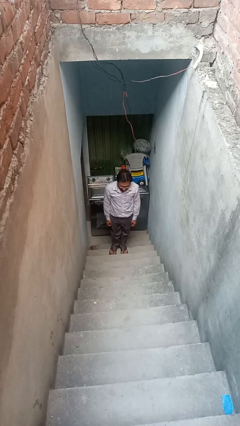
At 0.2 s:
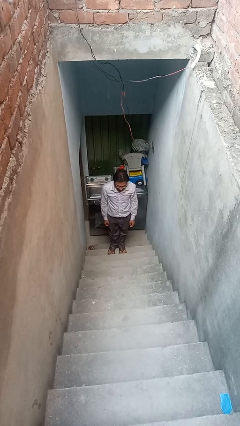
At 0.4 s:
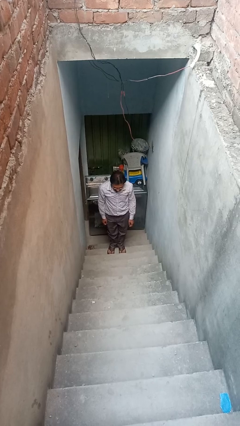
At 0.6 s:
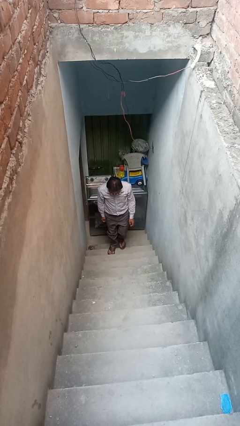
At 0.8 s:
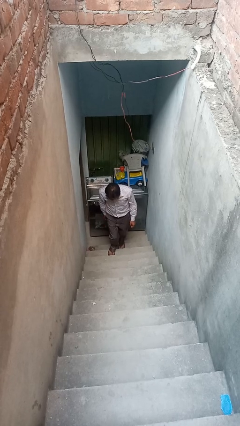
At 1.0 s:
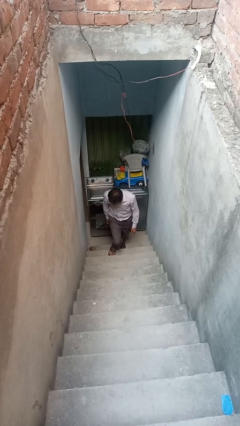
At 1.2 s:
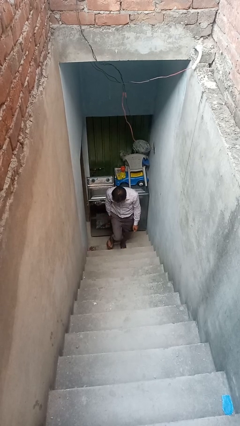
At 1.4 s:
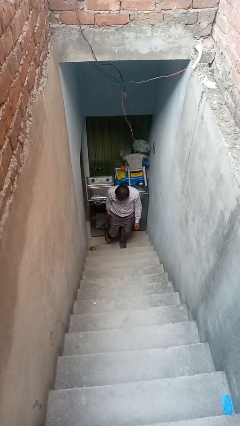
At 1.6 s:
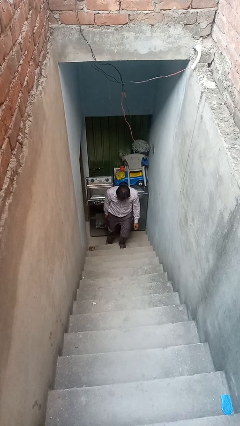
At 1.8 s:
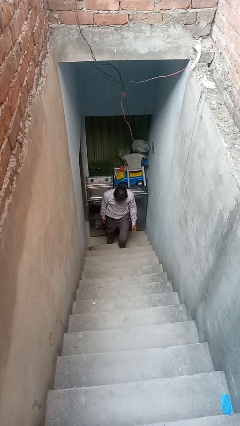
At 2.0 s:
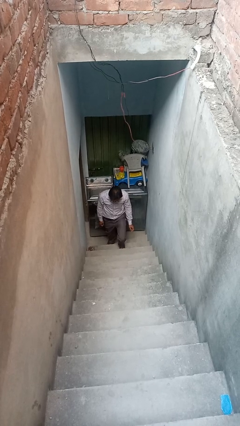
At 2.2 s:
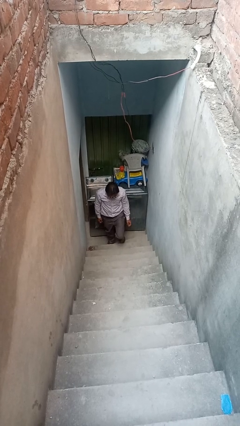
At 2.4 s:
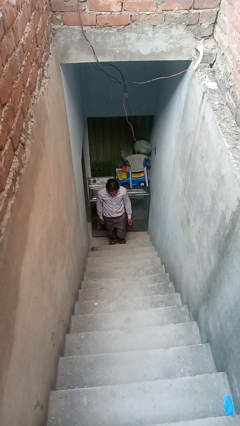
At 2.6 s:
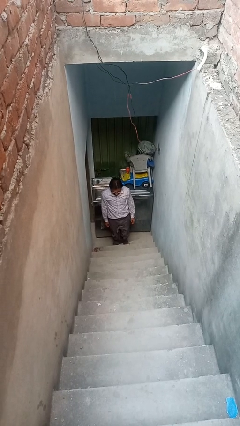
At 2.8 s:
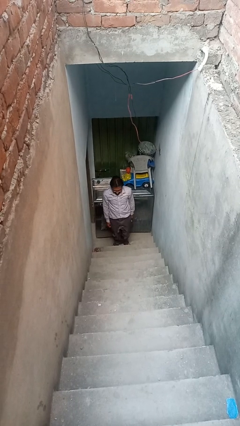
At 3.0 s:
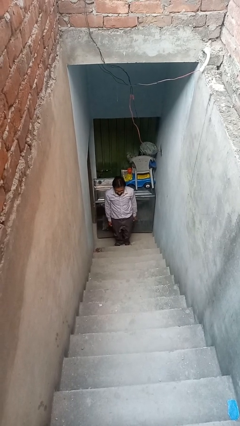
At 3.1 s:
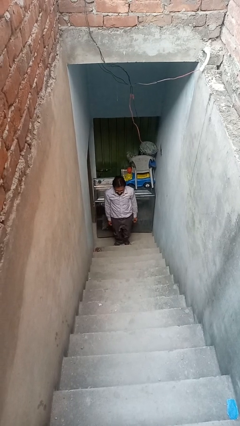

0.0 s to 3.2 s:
person climbs down stairs

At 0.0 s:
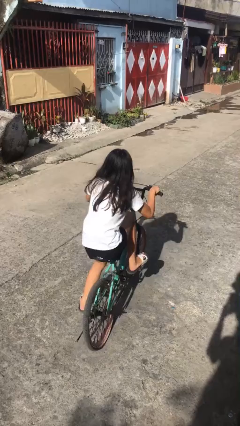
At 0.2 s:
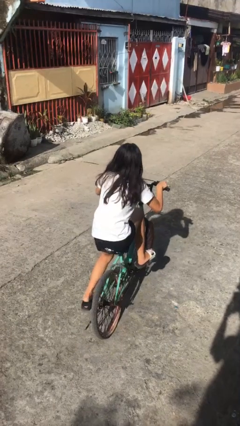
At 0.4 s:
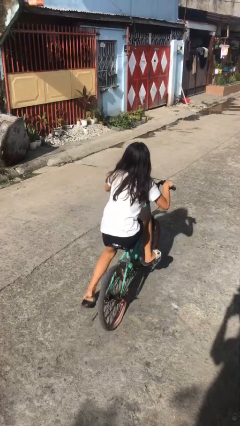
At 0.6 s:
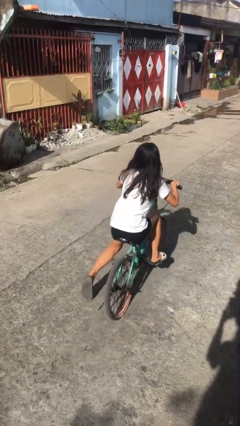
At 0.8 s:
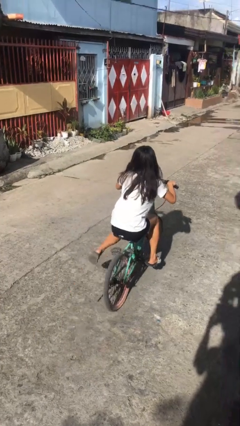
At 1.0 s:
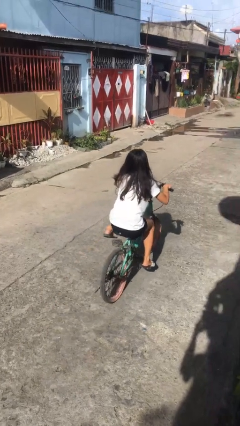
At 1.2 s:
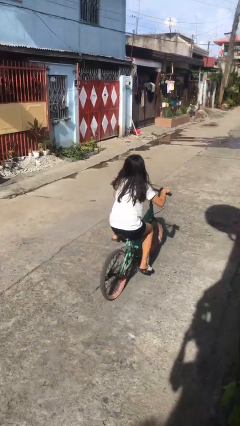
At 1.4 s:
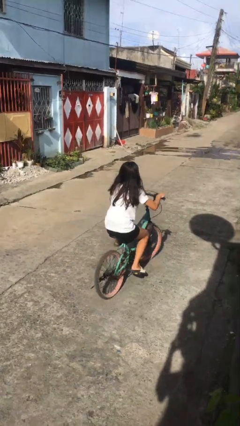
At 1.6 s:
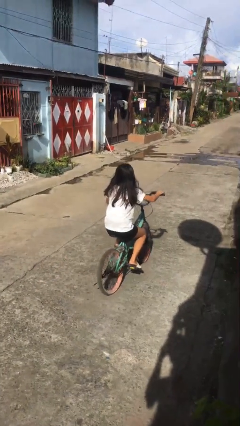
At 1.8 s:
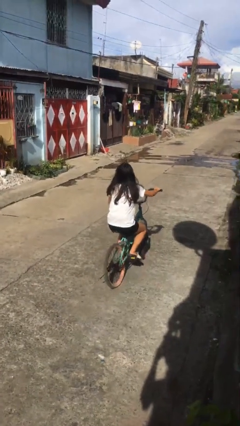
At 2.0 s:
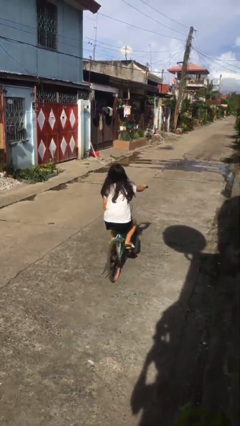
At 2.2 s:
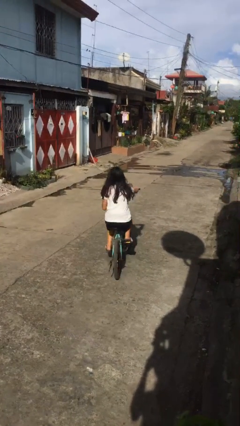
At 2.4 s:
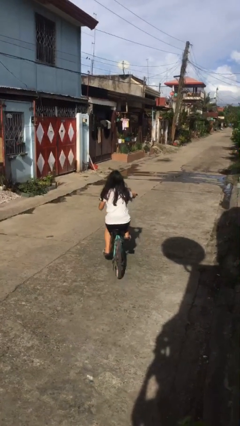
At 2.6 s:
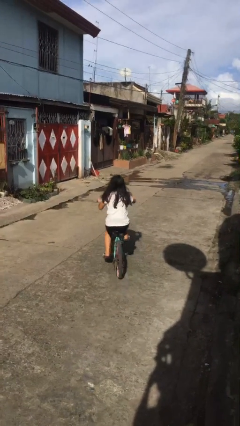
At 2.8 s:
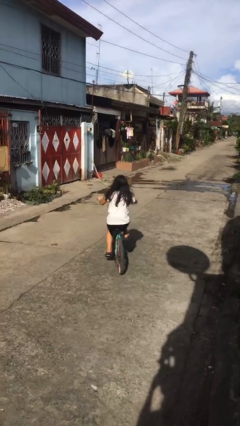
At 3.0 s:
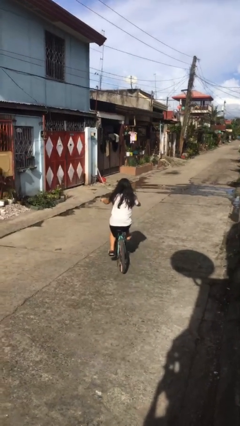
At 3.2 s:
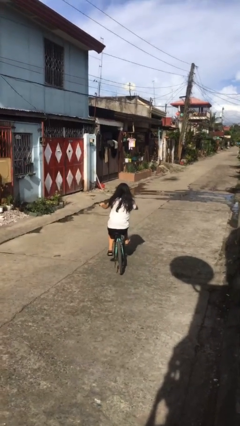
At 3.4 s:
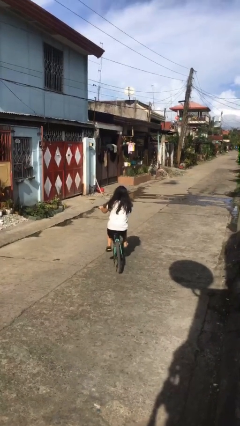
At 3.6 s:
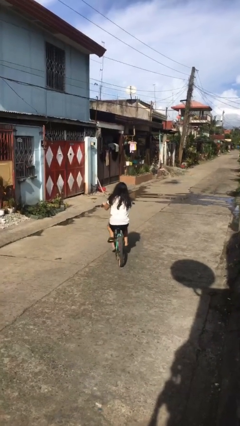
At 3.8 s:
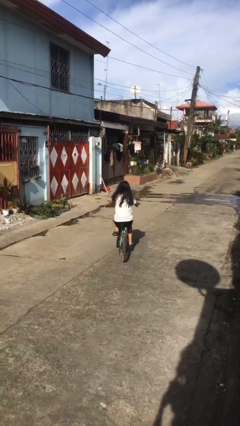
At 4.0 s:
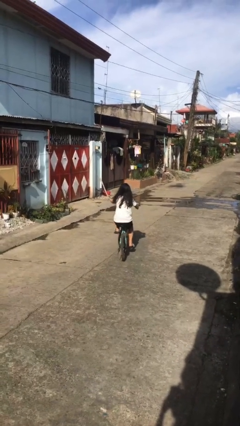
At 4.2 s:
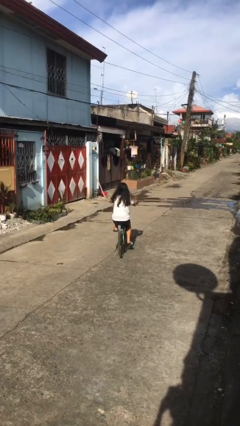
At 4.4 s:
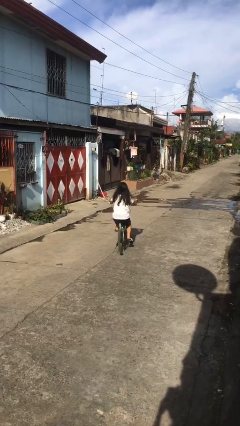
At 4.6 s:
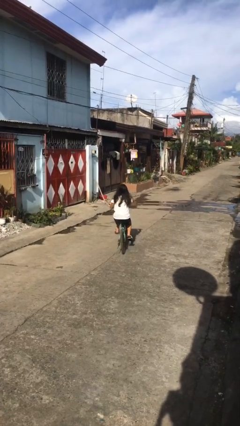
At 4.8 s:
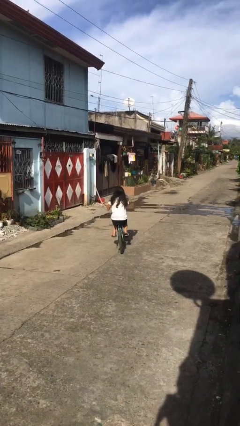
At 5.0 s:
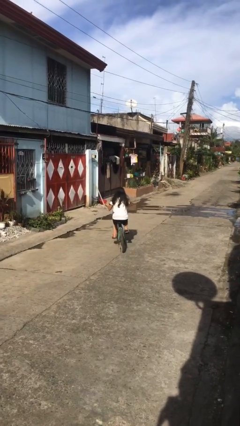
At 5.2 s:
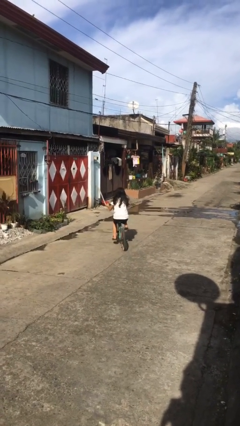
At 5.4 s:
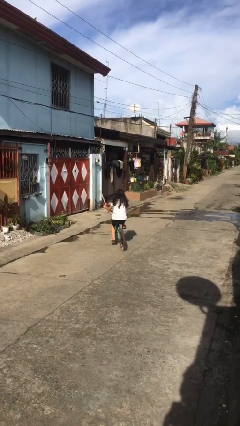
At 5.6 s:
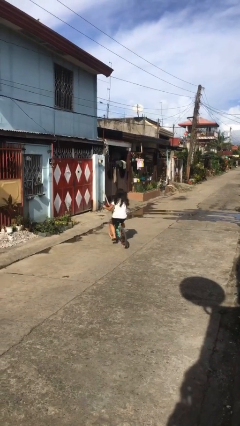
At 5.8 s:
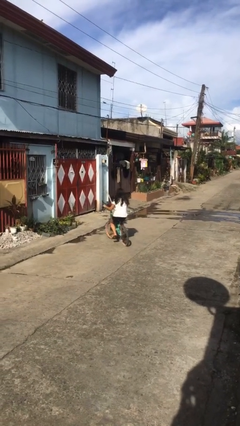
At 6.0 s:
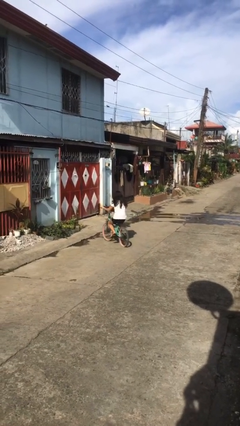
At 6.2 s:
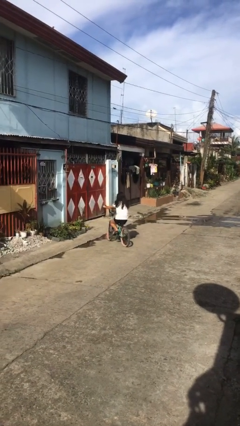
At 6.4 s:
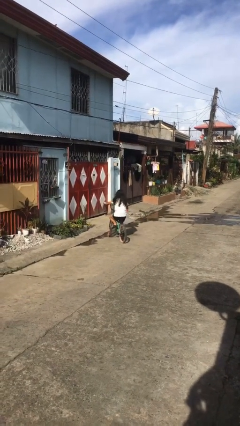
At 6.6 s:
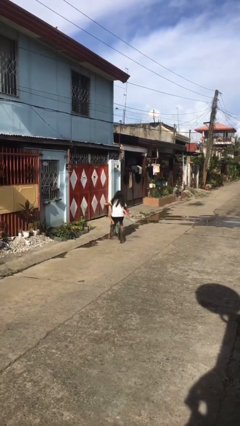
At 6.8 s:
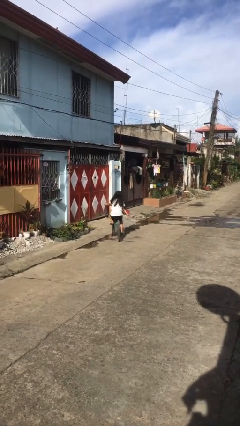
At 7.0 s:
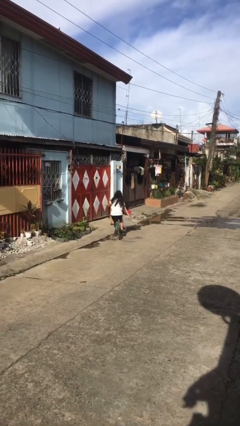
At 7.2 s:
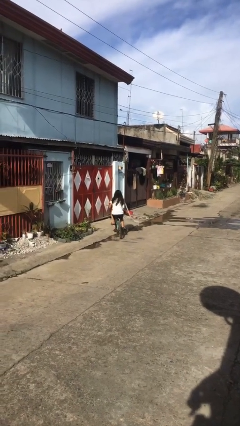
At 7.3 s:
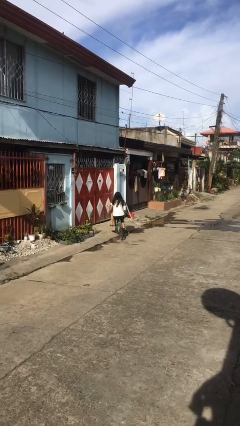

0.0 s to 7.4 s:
person rides bicycle

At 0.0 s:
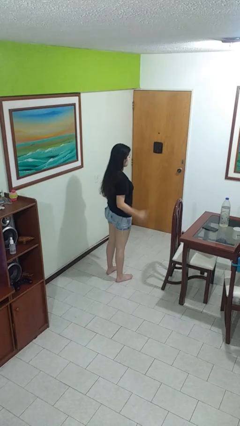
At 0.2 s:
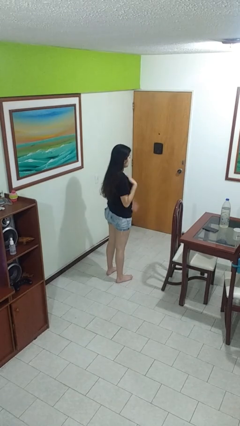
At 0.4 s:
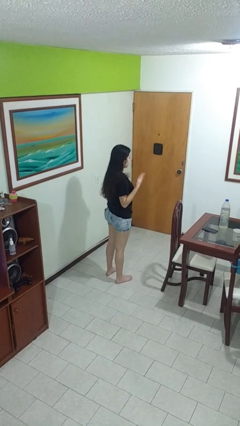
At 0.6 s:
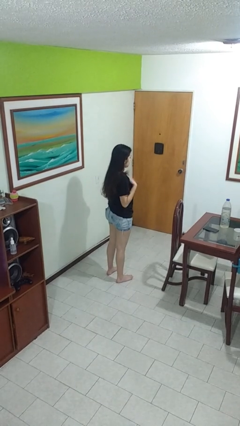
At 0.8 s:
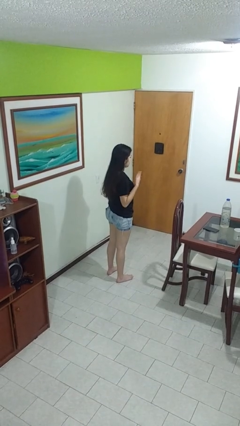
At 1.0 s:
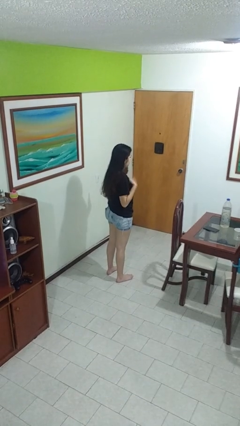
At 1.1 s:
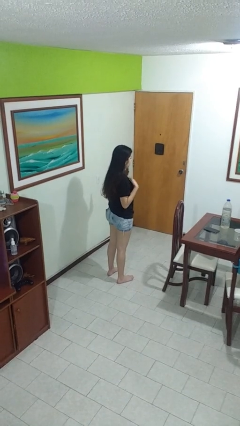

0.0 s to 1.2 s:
person drums on chest

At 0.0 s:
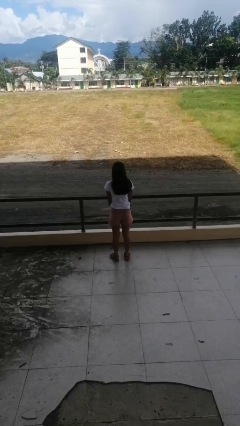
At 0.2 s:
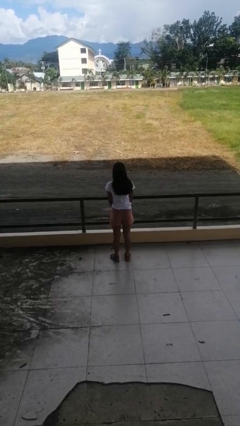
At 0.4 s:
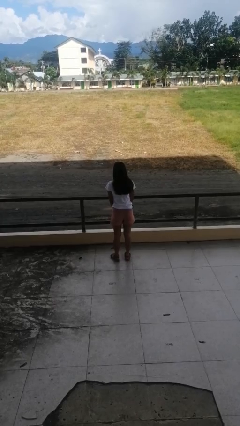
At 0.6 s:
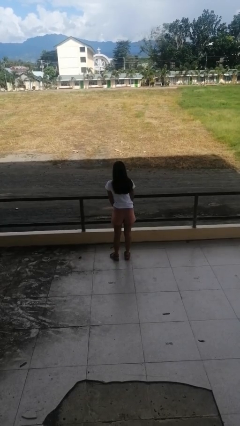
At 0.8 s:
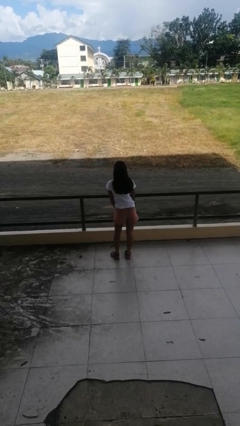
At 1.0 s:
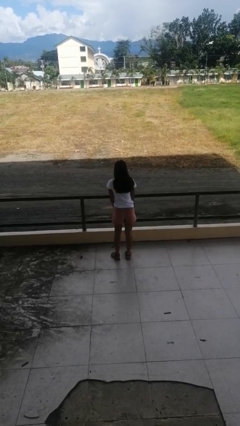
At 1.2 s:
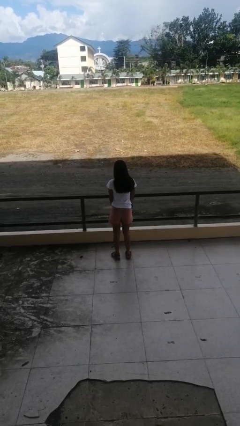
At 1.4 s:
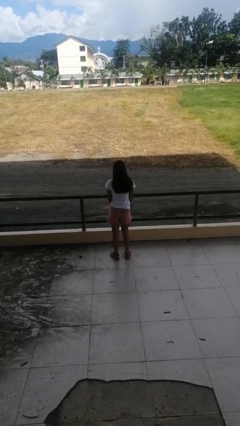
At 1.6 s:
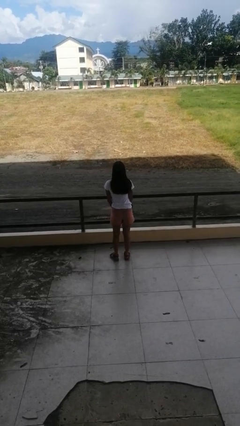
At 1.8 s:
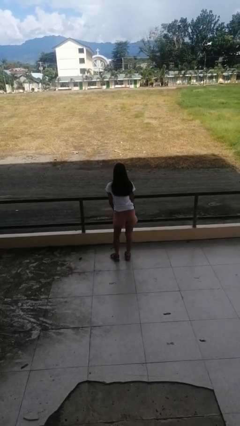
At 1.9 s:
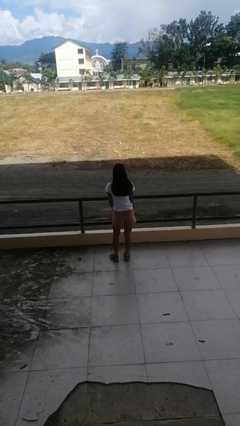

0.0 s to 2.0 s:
person wiggles hips

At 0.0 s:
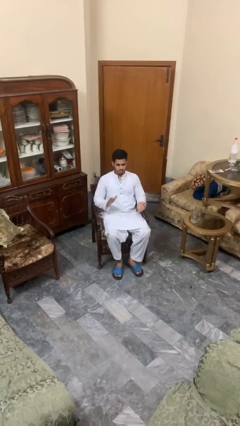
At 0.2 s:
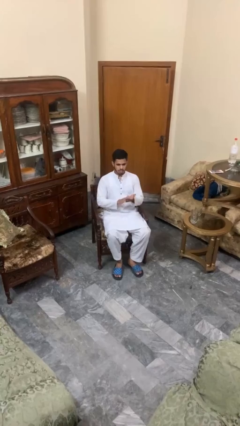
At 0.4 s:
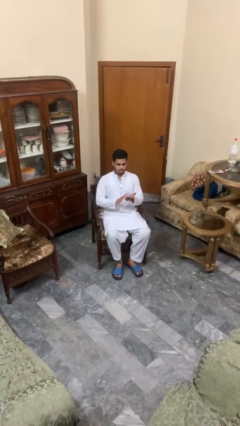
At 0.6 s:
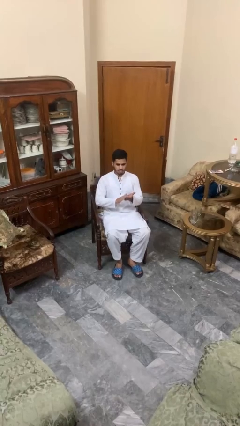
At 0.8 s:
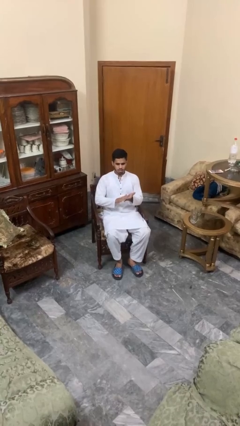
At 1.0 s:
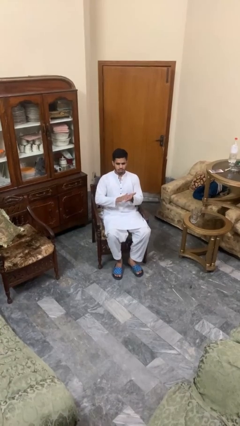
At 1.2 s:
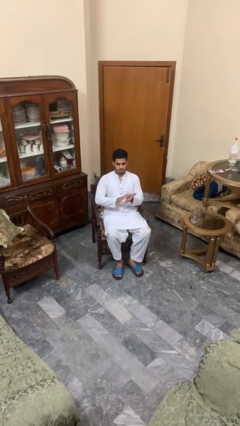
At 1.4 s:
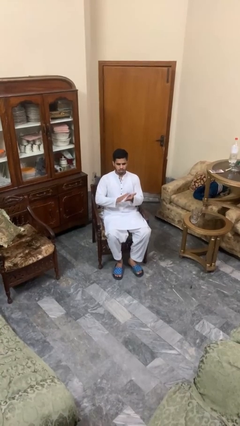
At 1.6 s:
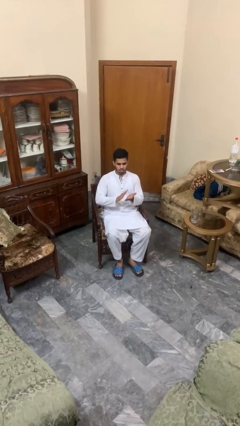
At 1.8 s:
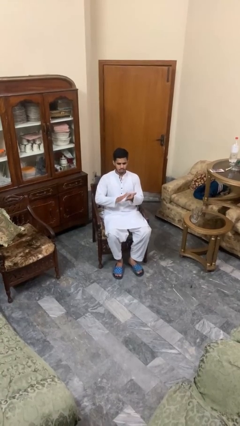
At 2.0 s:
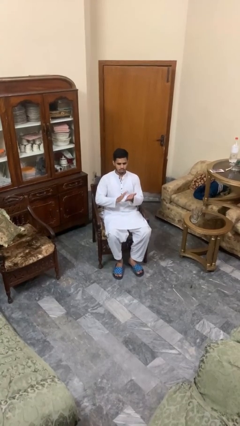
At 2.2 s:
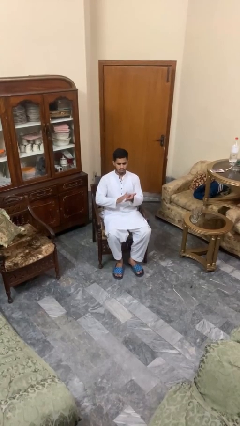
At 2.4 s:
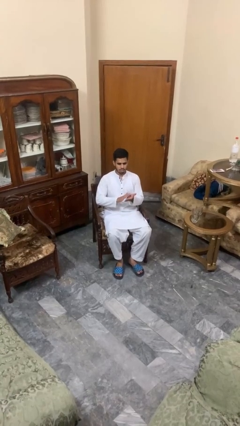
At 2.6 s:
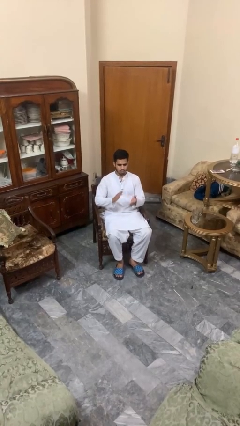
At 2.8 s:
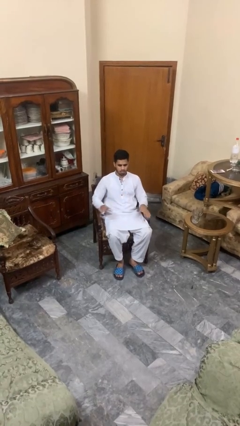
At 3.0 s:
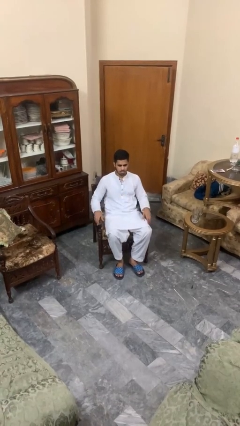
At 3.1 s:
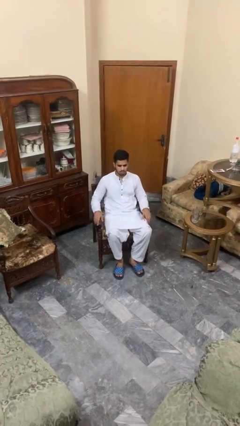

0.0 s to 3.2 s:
person claps hands

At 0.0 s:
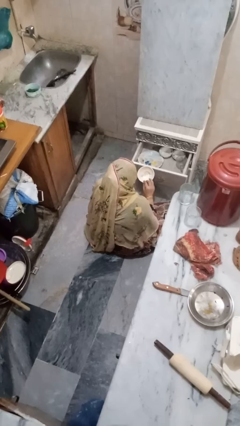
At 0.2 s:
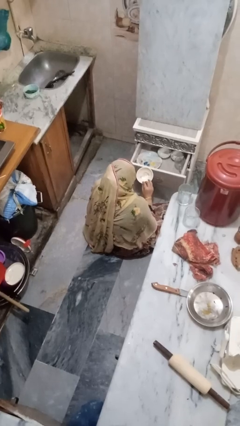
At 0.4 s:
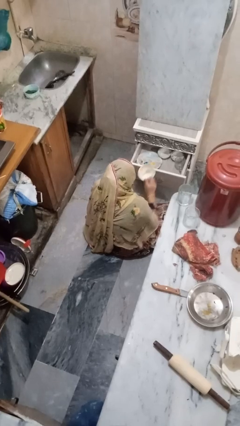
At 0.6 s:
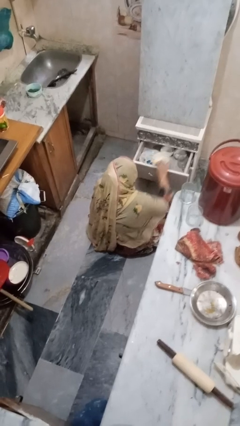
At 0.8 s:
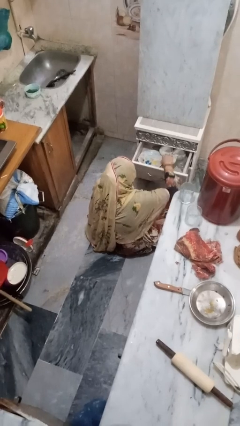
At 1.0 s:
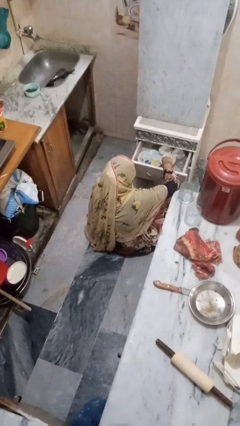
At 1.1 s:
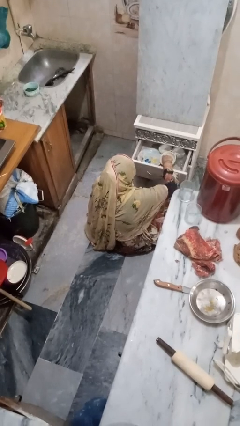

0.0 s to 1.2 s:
person puts object into kitchen drawer
